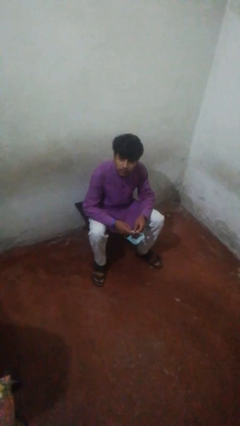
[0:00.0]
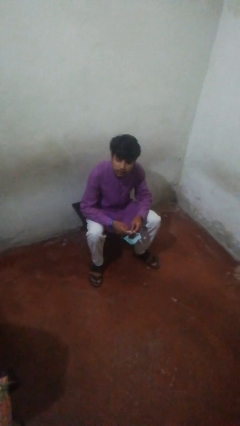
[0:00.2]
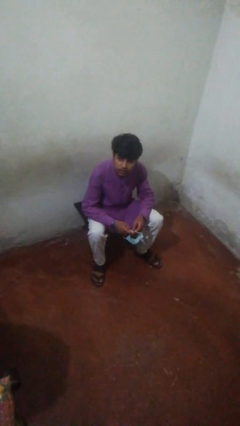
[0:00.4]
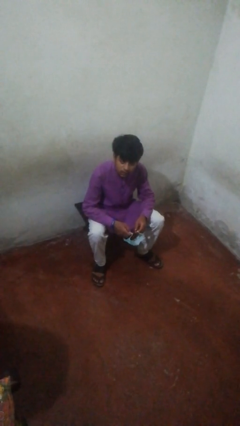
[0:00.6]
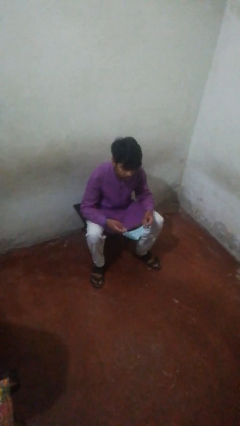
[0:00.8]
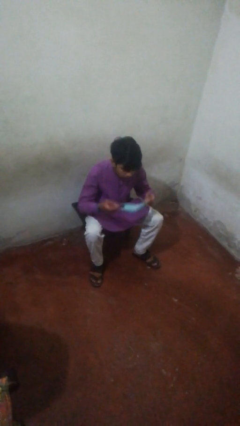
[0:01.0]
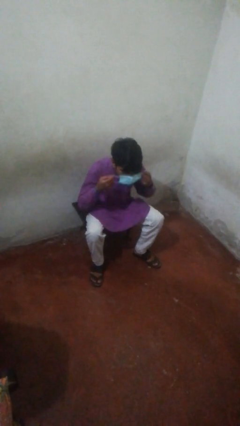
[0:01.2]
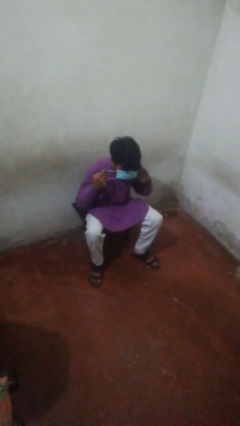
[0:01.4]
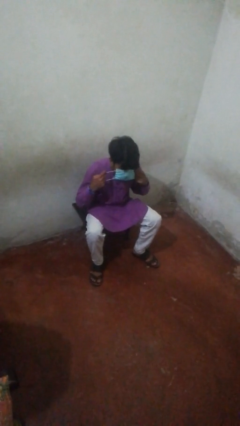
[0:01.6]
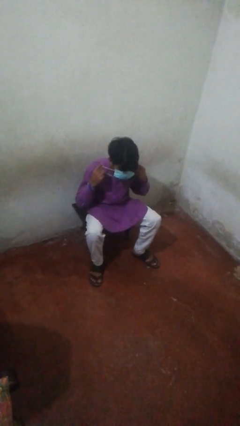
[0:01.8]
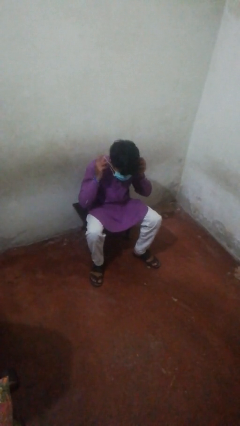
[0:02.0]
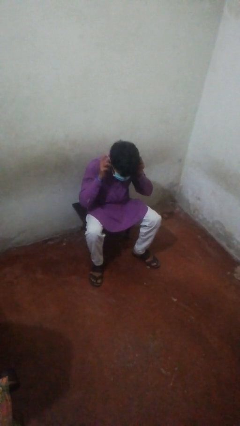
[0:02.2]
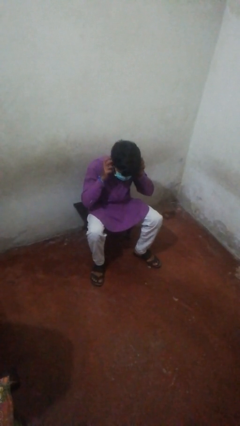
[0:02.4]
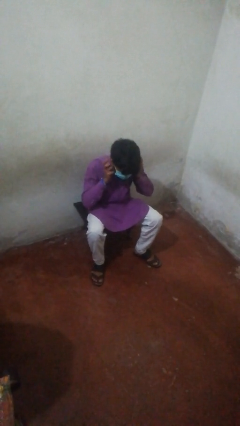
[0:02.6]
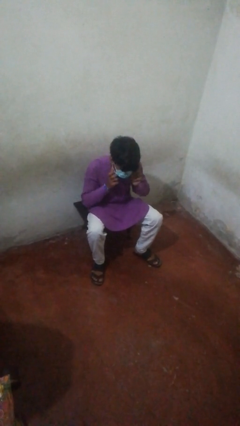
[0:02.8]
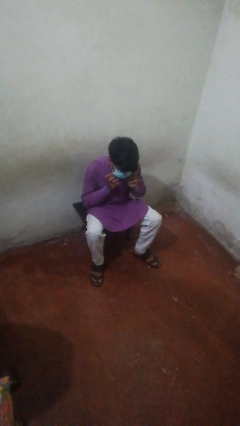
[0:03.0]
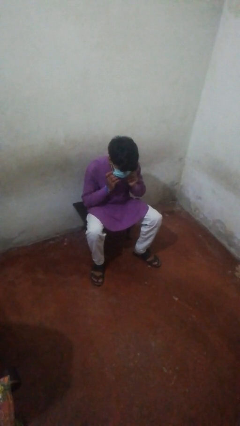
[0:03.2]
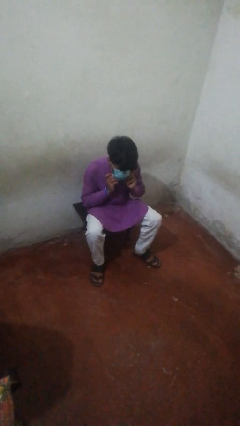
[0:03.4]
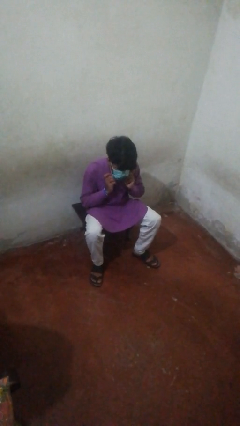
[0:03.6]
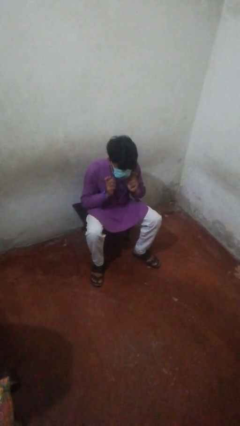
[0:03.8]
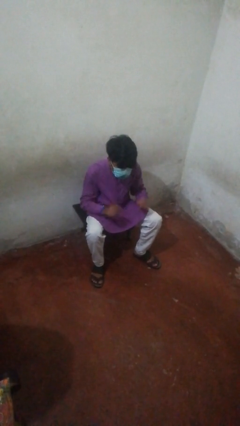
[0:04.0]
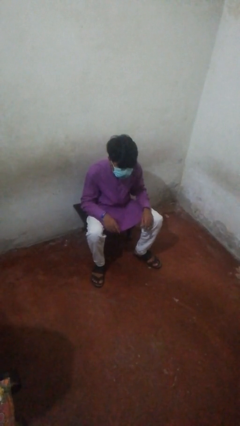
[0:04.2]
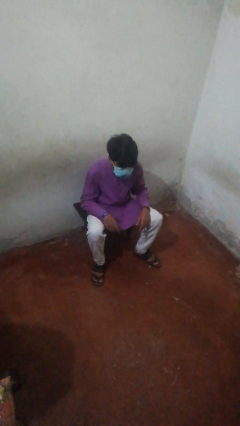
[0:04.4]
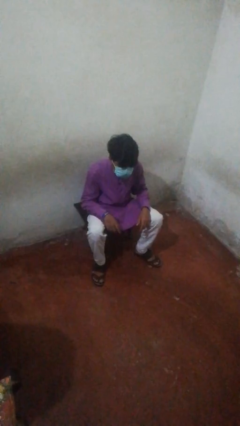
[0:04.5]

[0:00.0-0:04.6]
person puts on facemask

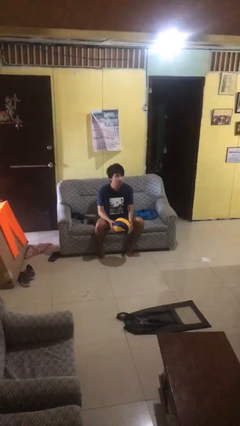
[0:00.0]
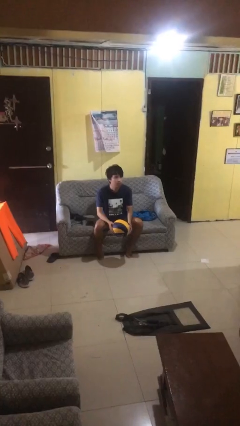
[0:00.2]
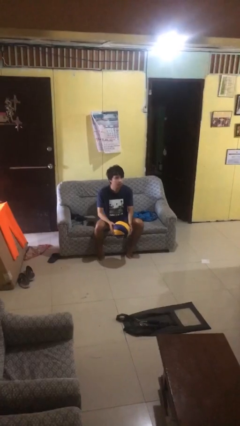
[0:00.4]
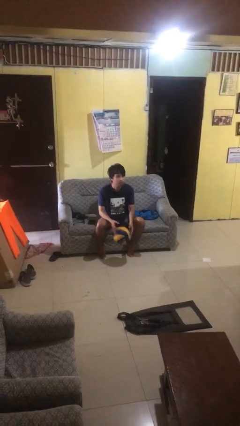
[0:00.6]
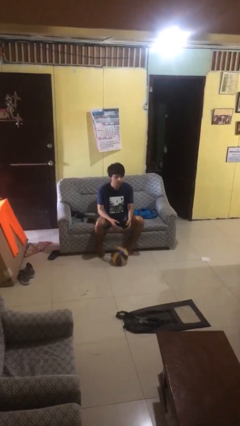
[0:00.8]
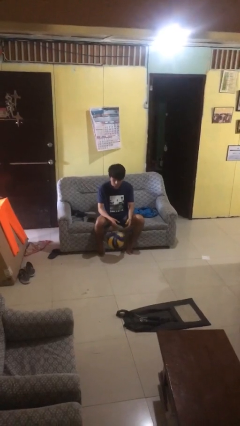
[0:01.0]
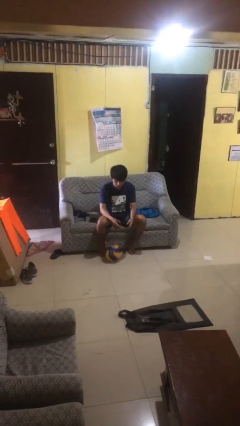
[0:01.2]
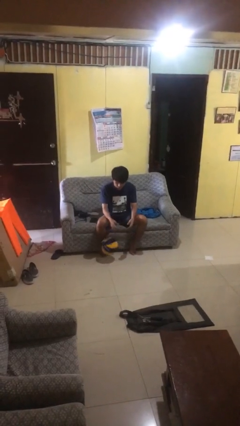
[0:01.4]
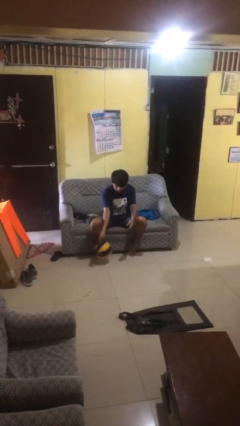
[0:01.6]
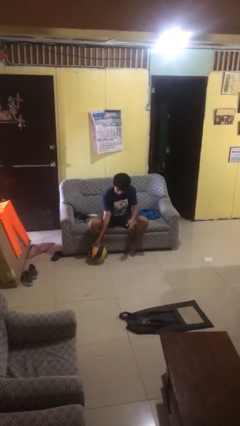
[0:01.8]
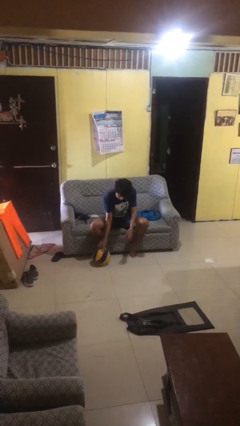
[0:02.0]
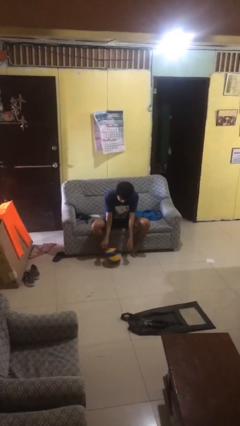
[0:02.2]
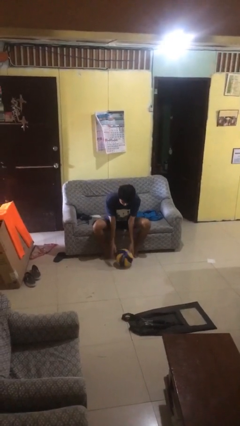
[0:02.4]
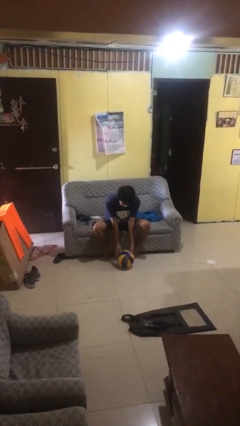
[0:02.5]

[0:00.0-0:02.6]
person drops object

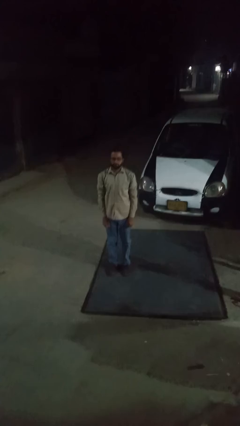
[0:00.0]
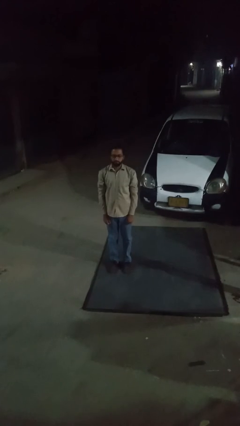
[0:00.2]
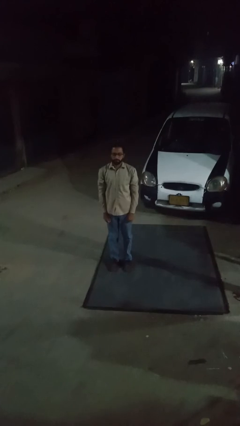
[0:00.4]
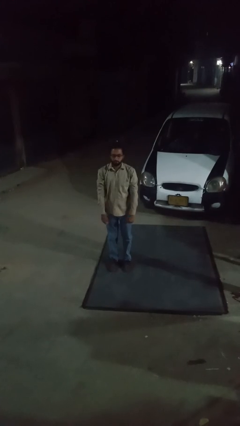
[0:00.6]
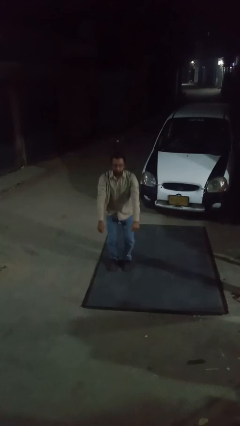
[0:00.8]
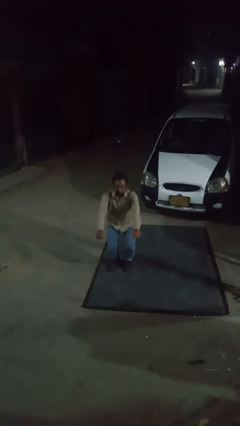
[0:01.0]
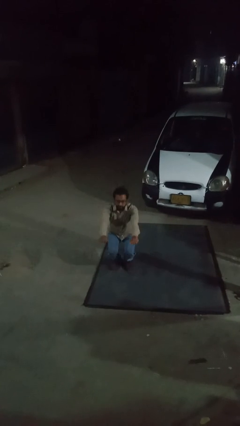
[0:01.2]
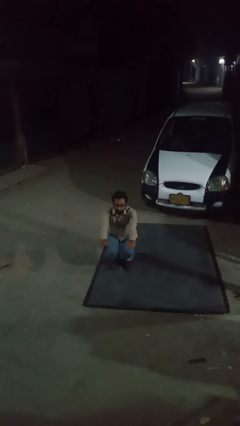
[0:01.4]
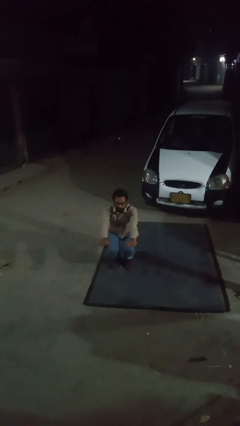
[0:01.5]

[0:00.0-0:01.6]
person squats

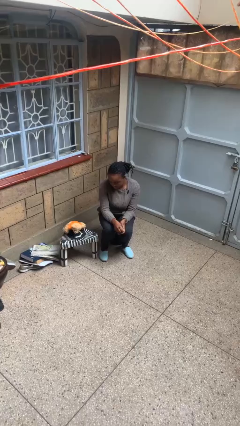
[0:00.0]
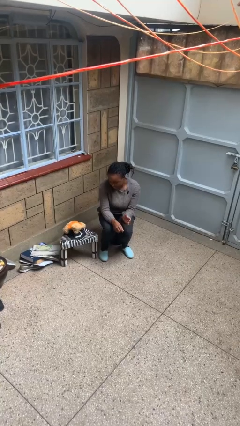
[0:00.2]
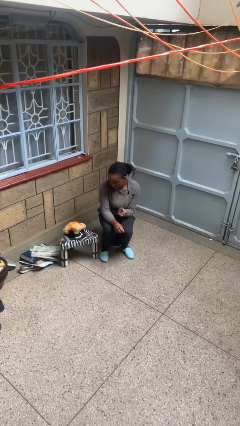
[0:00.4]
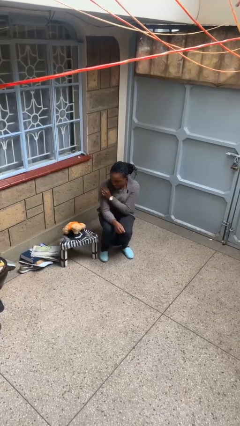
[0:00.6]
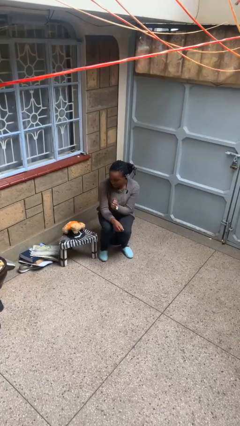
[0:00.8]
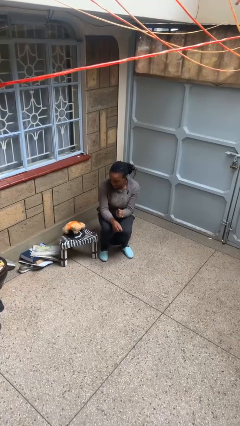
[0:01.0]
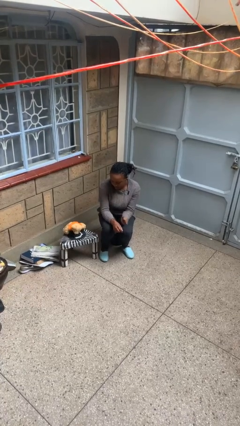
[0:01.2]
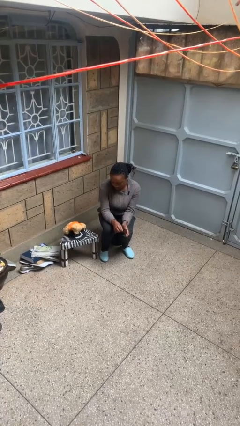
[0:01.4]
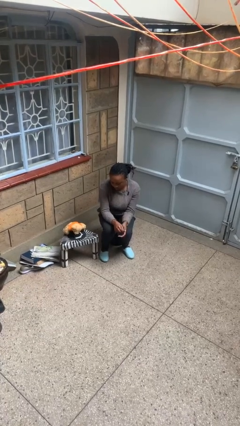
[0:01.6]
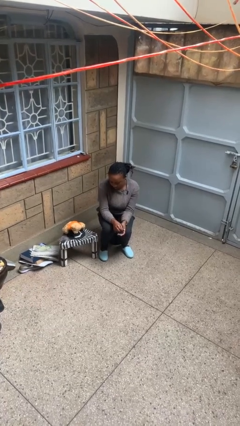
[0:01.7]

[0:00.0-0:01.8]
person swats bug

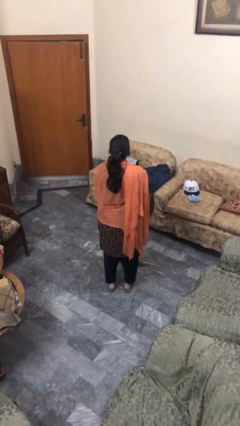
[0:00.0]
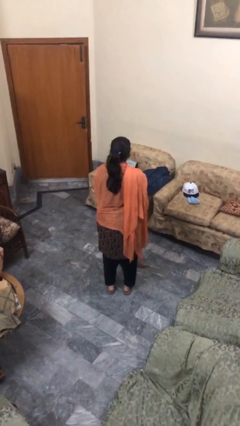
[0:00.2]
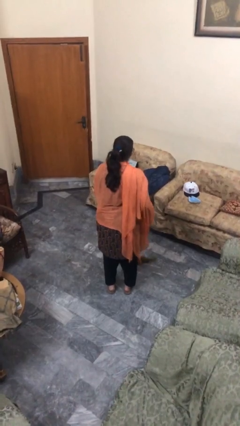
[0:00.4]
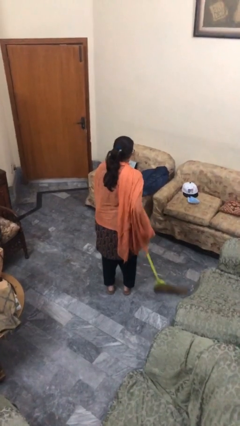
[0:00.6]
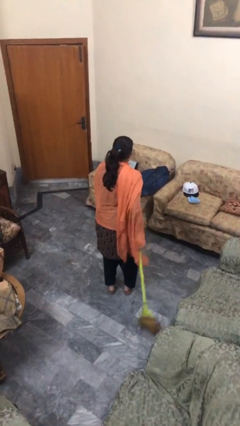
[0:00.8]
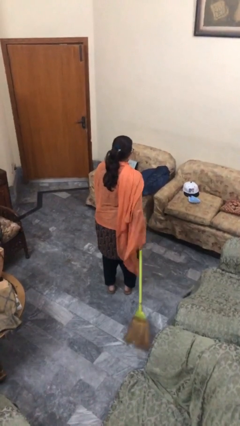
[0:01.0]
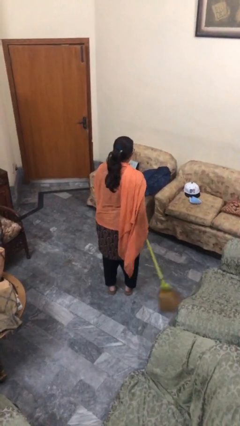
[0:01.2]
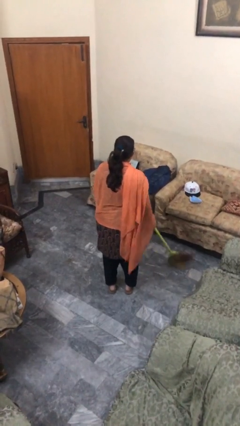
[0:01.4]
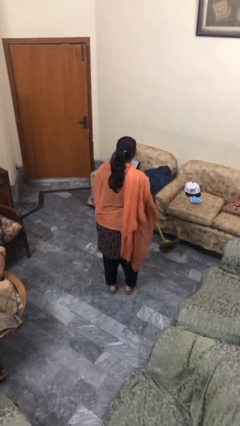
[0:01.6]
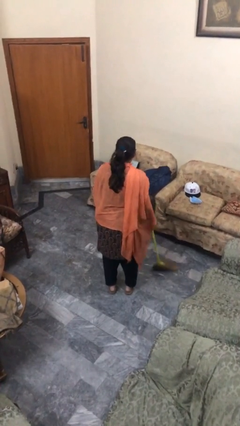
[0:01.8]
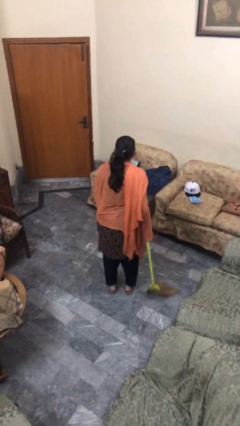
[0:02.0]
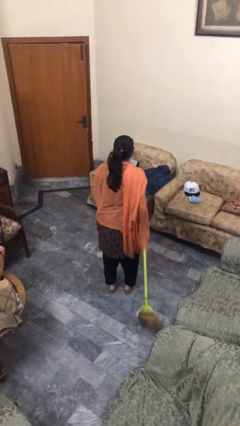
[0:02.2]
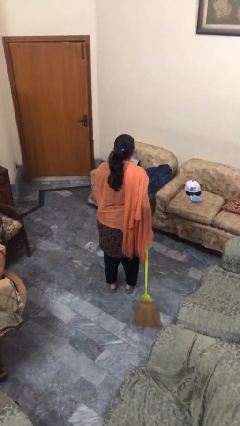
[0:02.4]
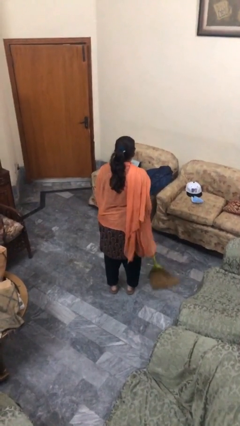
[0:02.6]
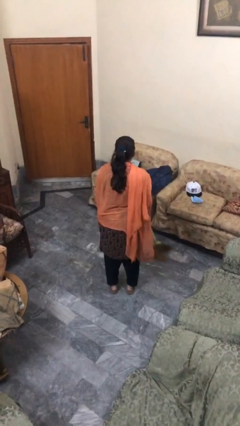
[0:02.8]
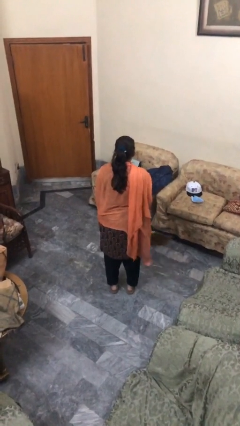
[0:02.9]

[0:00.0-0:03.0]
person sweeps floor

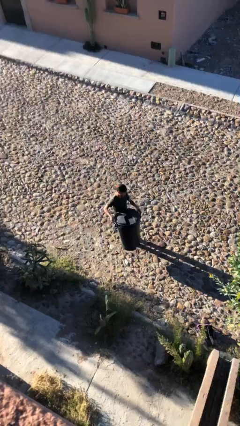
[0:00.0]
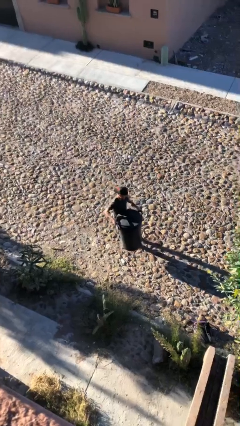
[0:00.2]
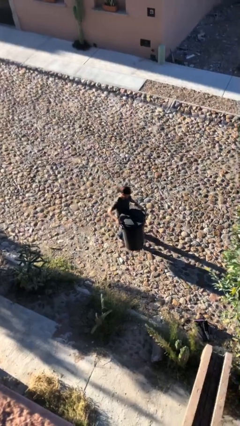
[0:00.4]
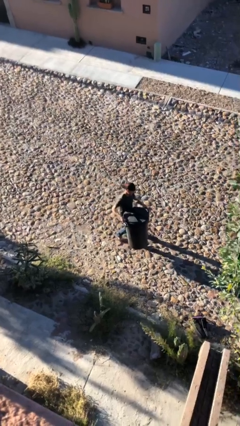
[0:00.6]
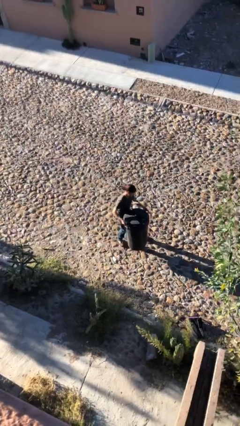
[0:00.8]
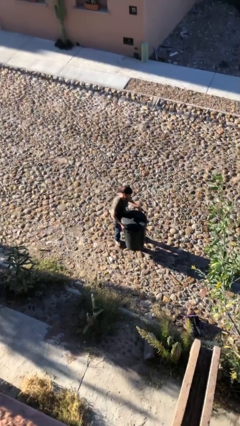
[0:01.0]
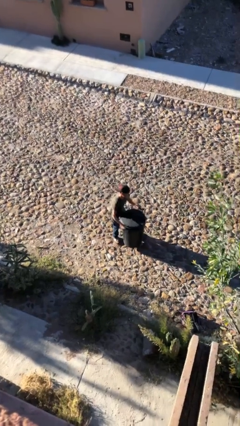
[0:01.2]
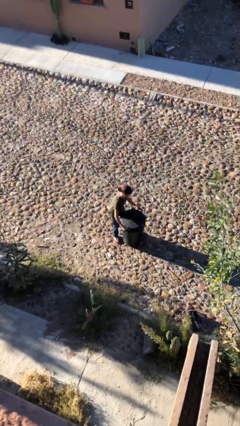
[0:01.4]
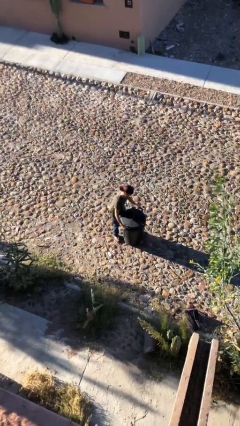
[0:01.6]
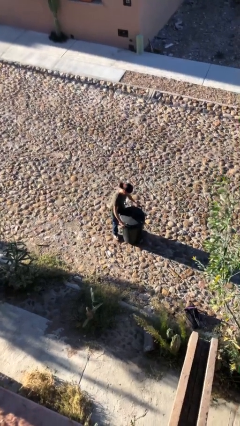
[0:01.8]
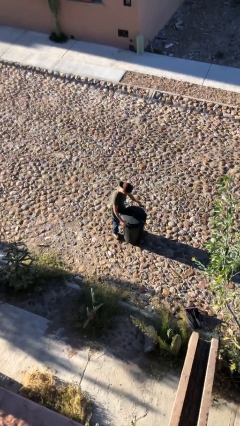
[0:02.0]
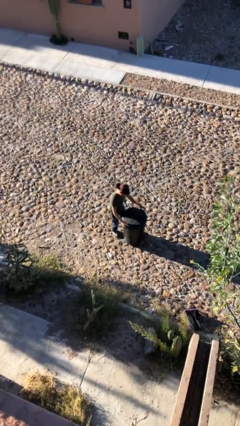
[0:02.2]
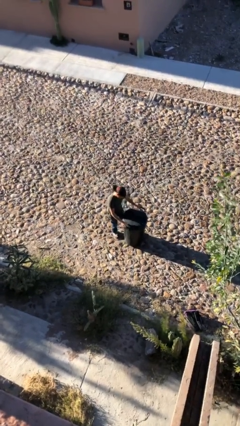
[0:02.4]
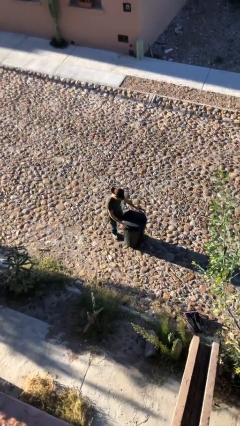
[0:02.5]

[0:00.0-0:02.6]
person puts down object on floor

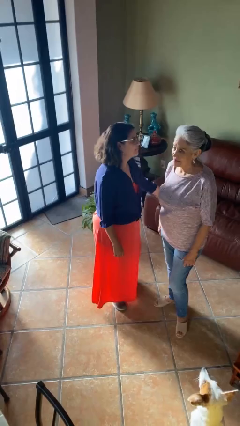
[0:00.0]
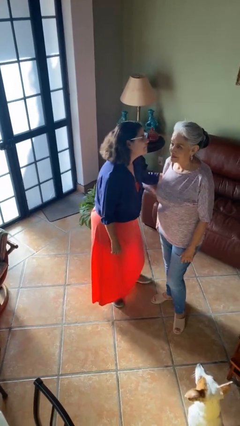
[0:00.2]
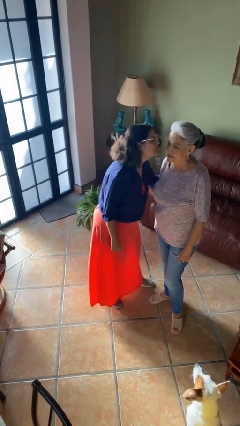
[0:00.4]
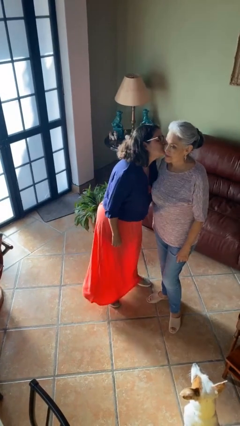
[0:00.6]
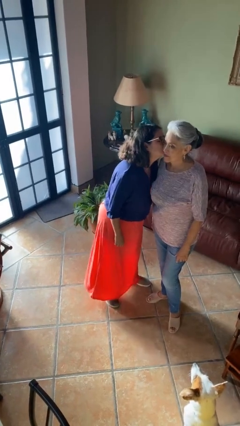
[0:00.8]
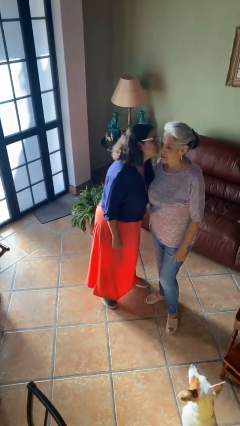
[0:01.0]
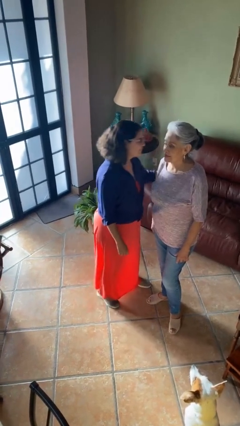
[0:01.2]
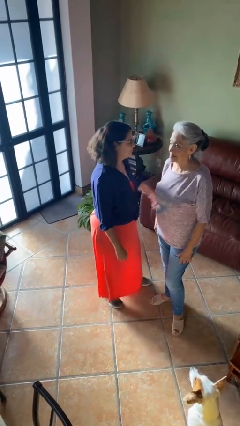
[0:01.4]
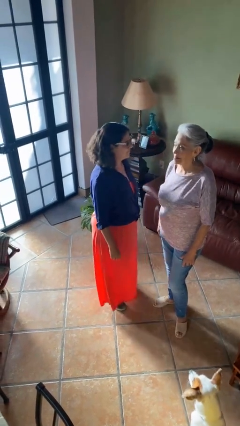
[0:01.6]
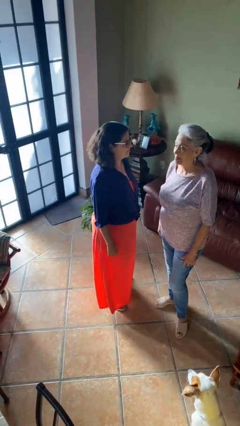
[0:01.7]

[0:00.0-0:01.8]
person kisses cheek of person
